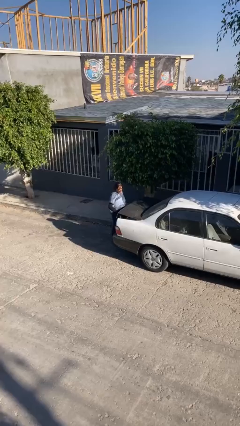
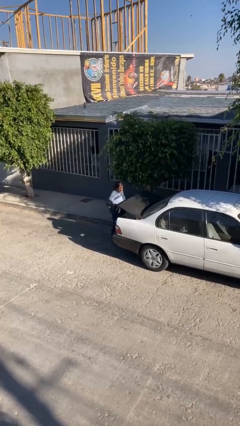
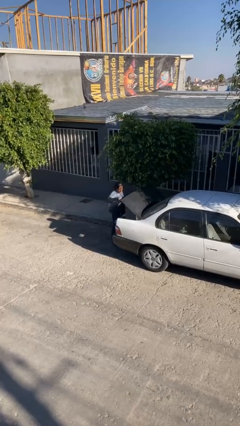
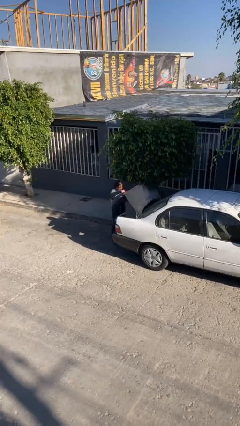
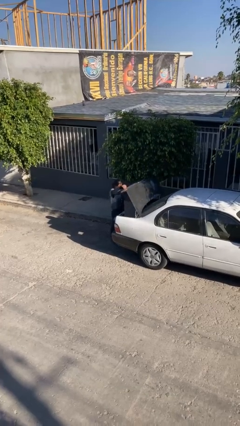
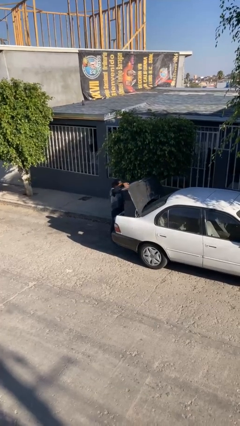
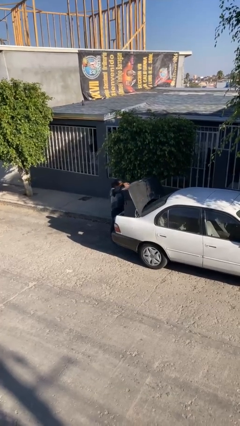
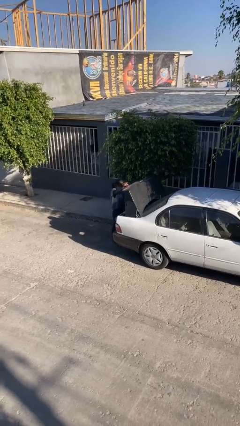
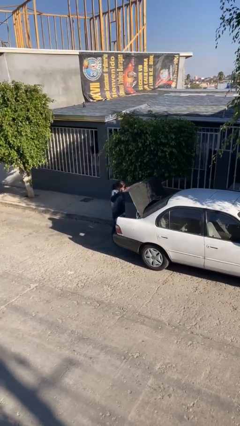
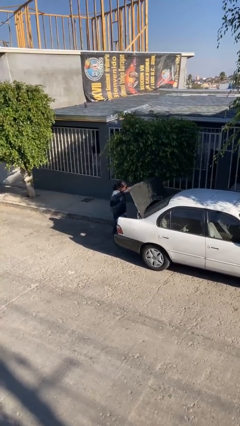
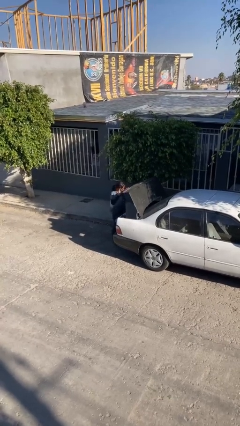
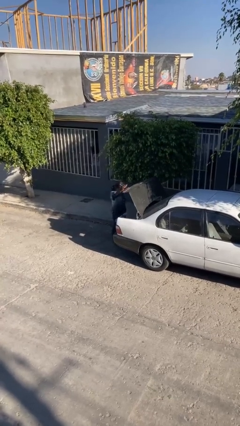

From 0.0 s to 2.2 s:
person opens car trunk

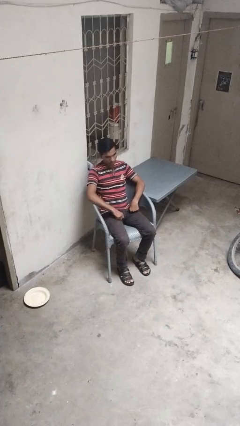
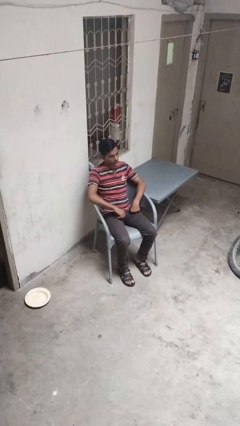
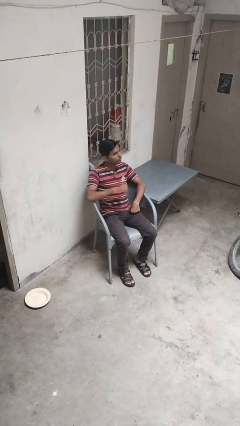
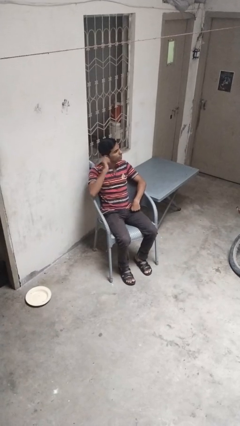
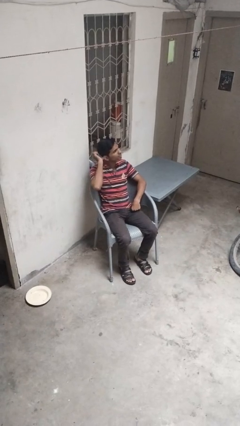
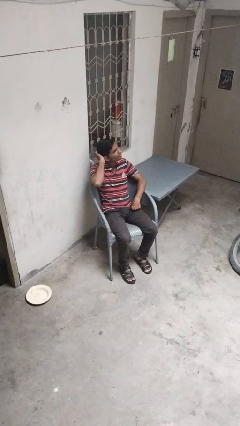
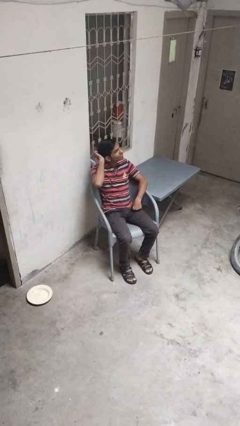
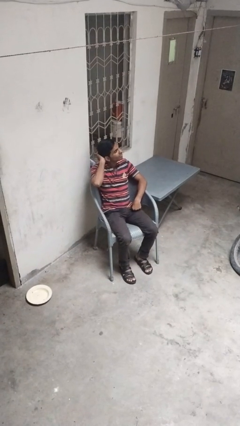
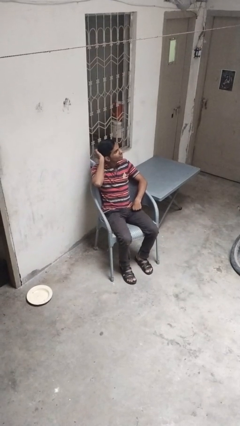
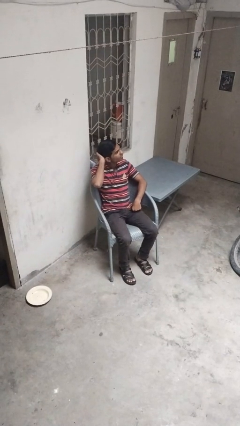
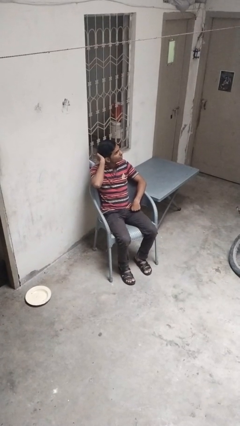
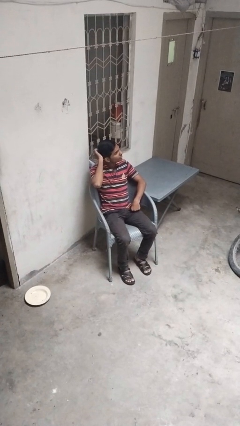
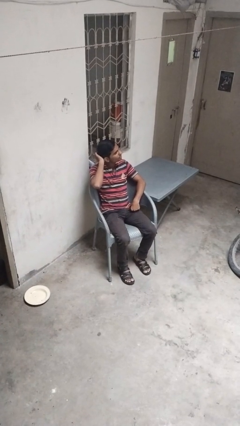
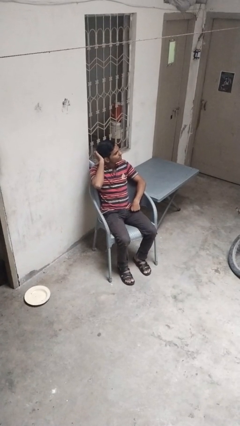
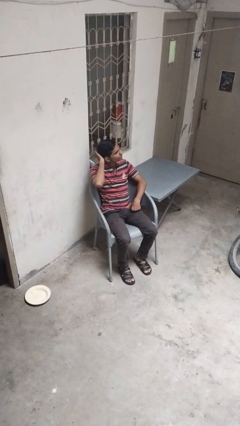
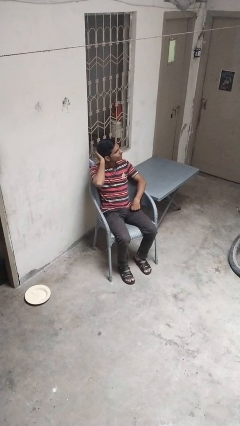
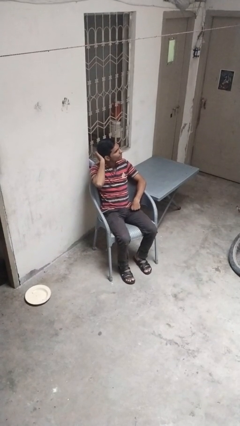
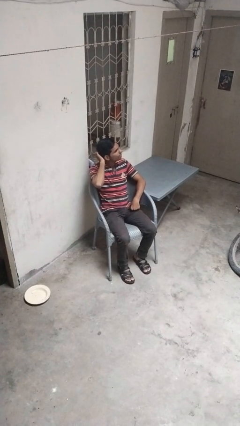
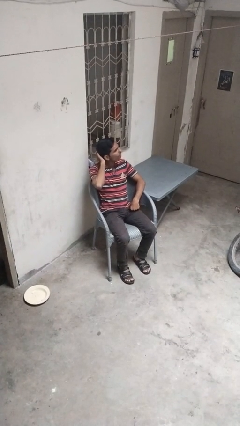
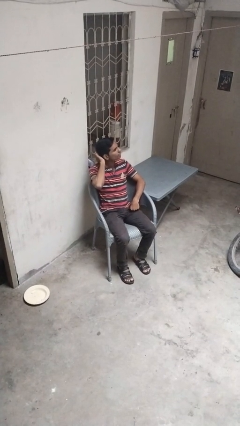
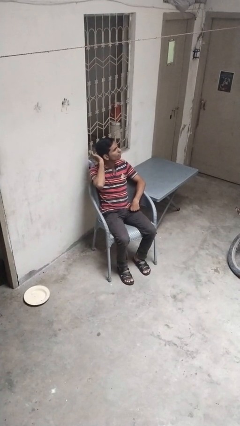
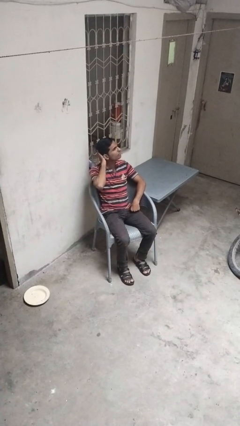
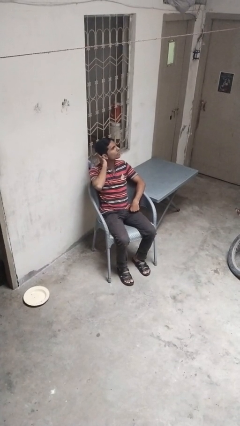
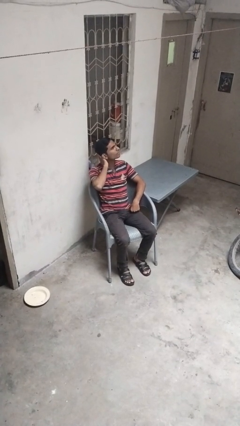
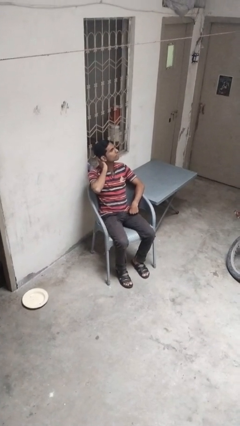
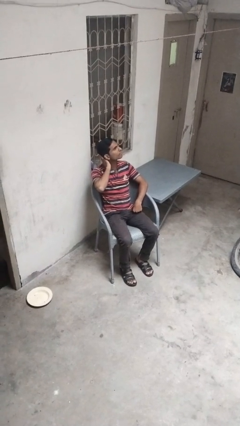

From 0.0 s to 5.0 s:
person strokes hair

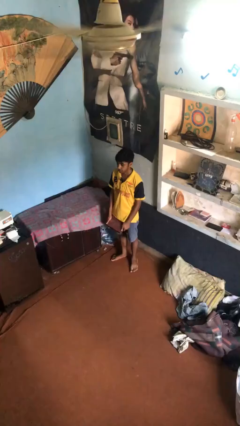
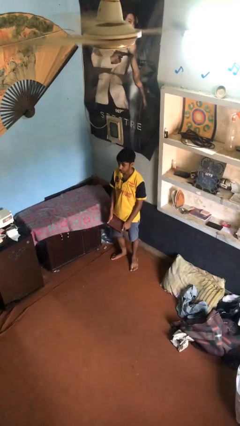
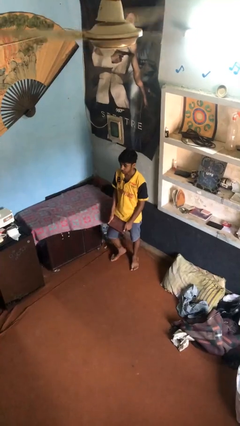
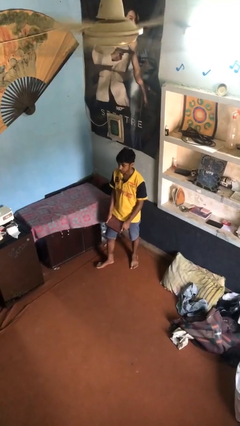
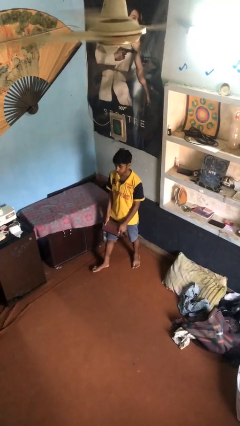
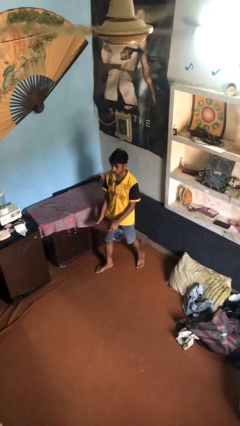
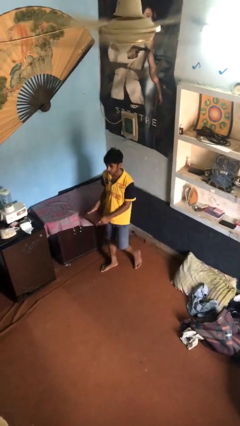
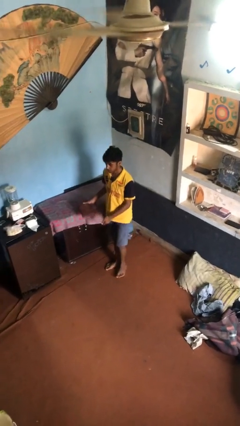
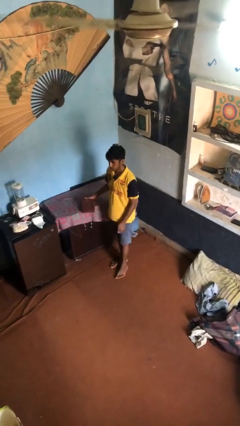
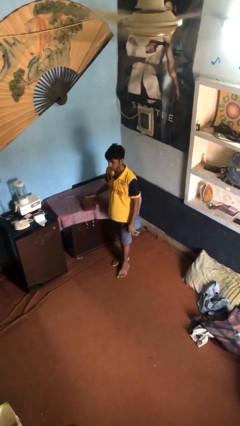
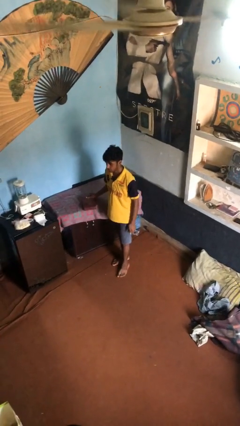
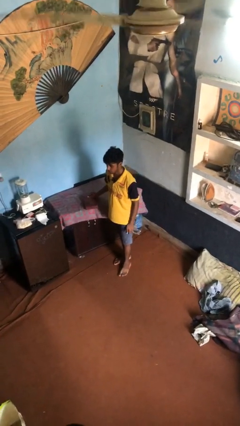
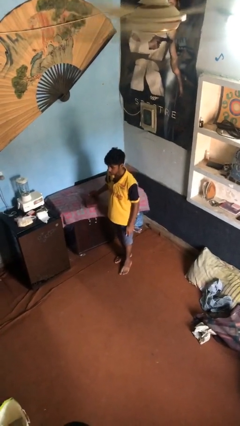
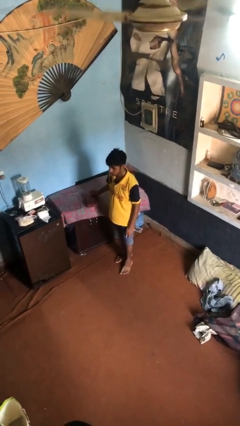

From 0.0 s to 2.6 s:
person puts down object on table

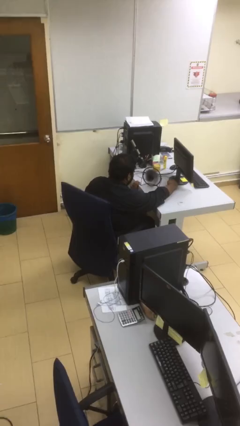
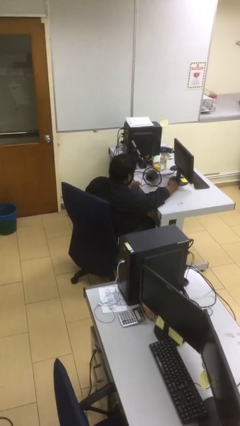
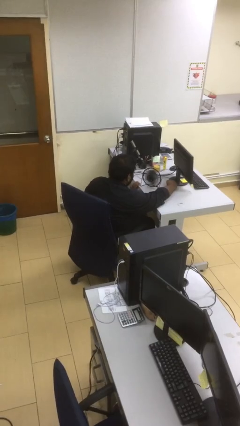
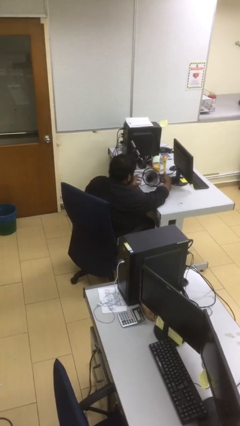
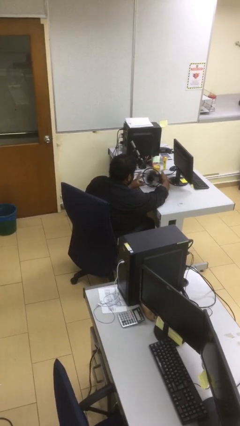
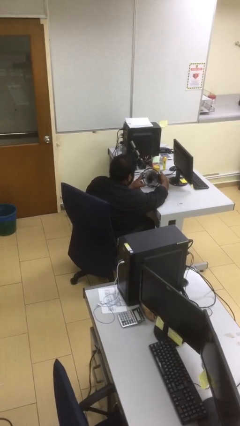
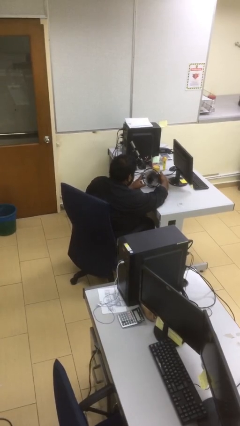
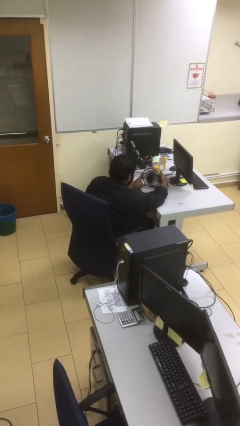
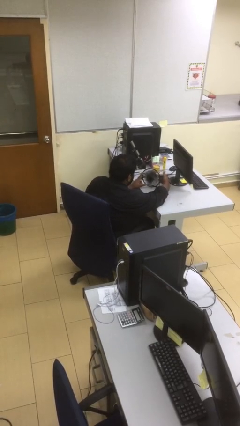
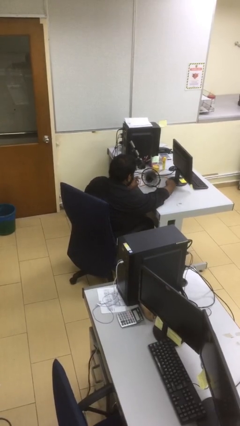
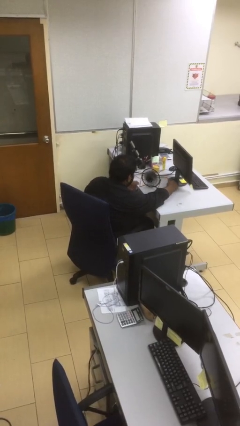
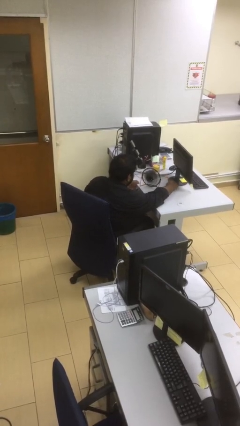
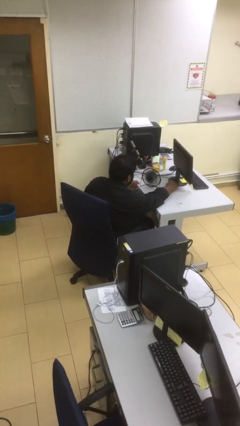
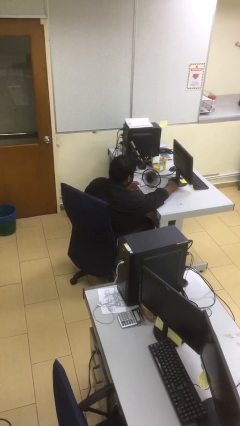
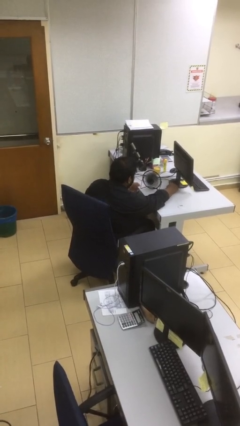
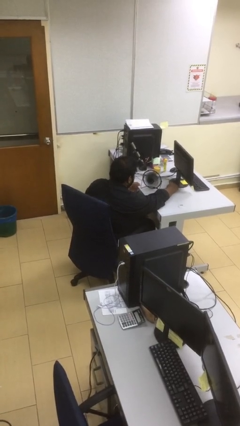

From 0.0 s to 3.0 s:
person turns on fan

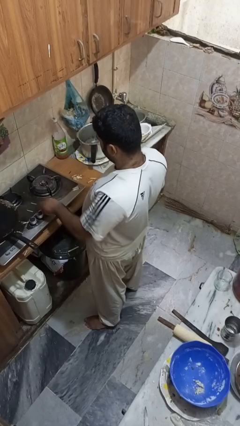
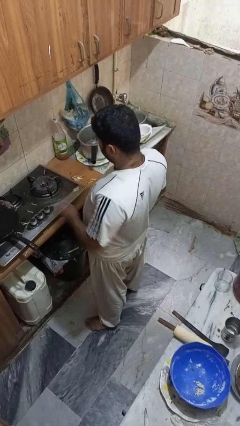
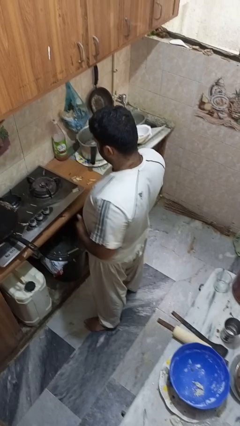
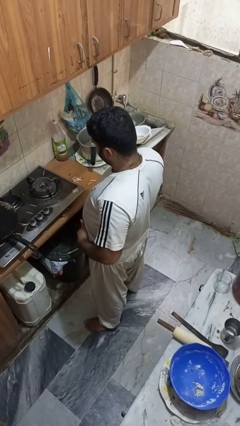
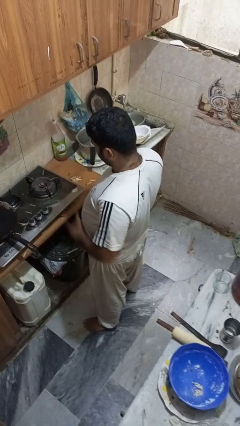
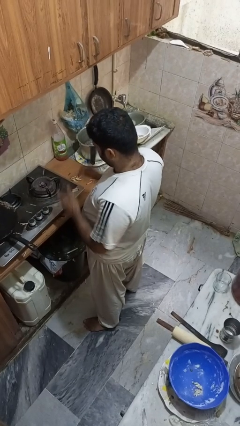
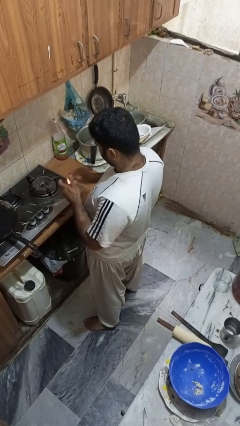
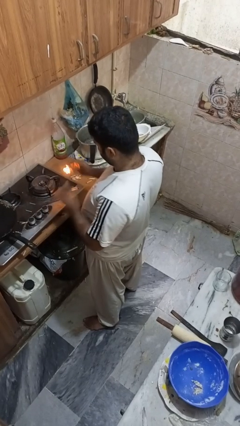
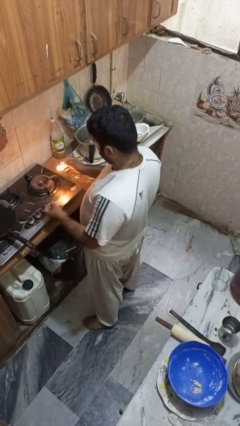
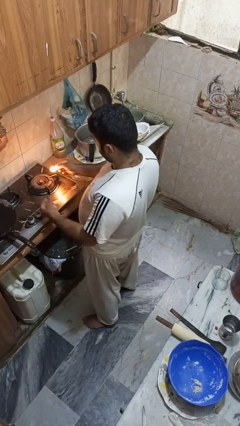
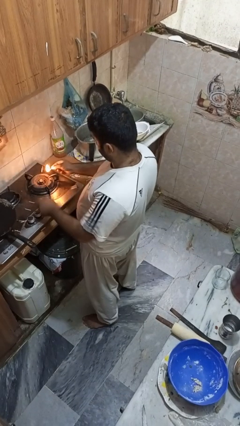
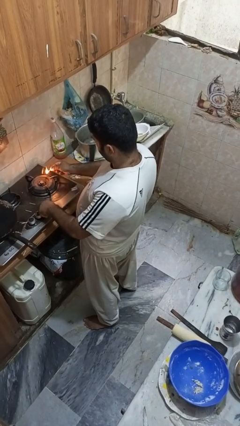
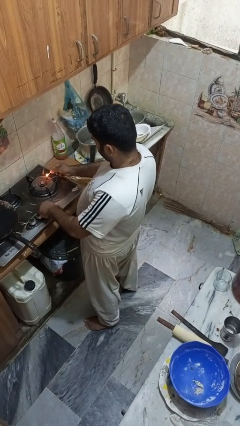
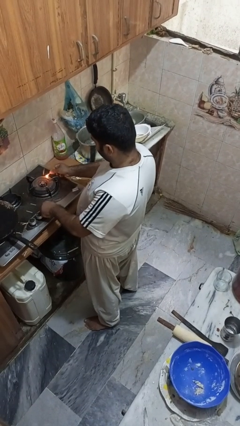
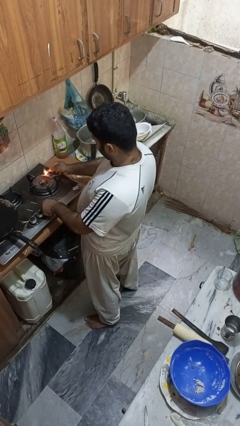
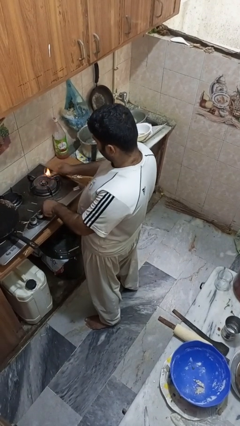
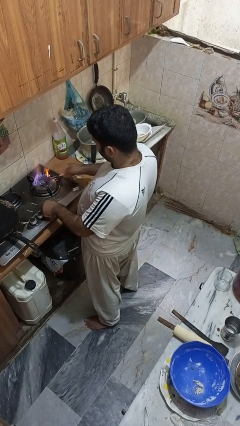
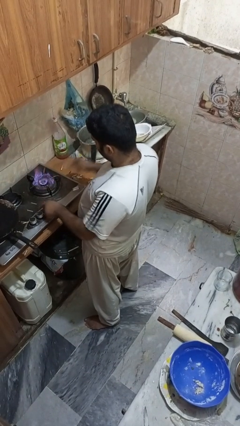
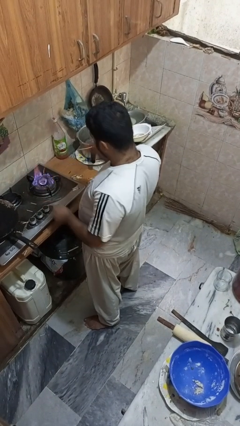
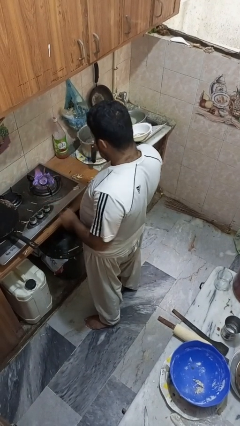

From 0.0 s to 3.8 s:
person turns on stovetop

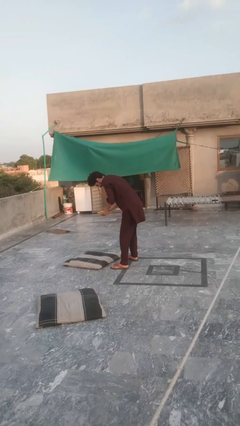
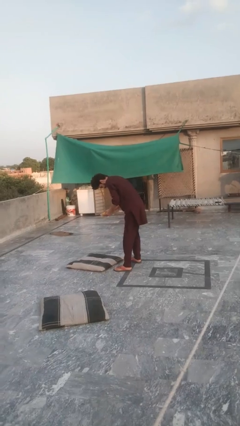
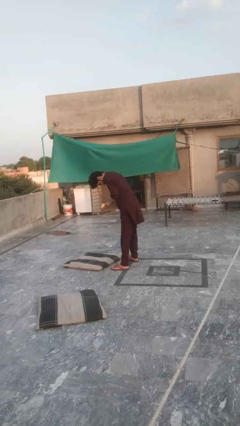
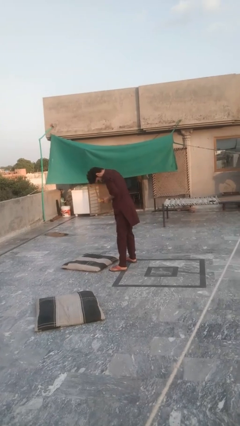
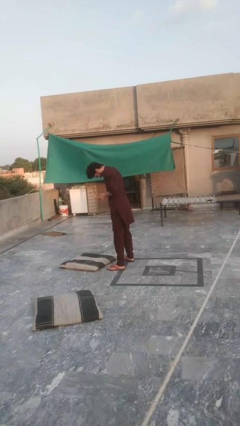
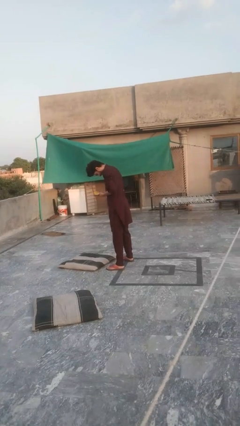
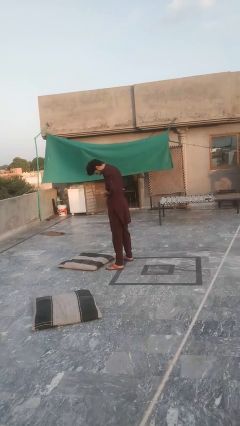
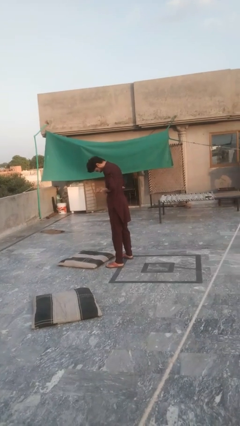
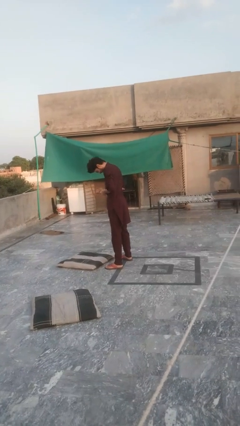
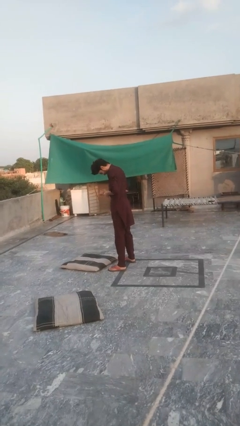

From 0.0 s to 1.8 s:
person picks up object from floor
